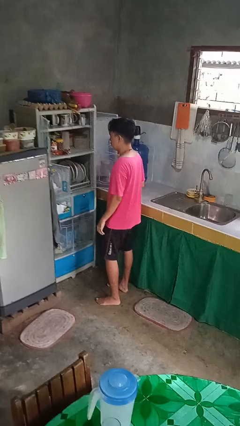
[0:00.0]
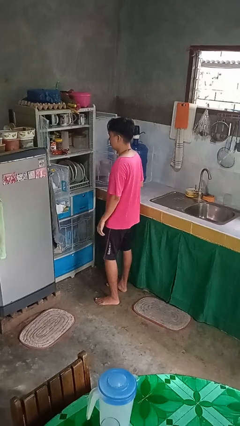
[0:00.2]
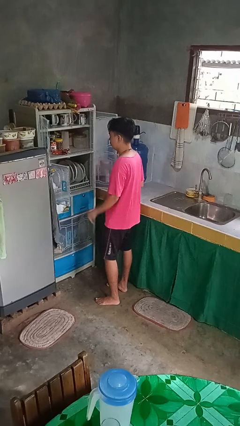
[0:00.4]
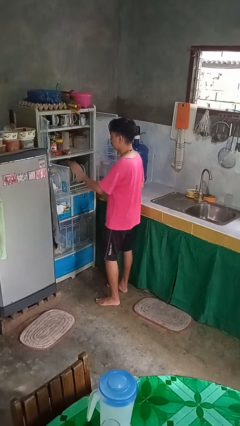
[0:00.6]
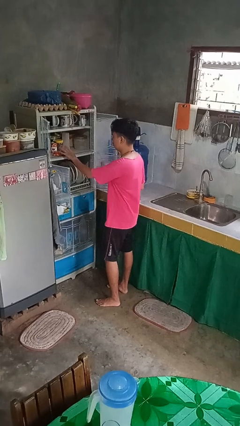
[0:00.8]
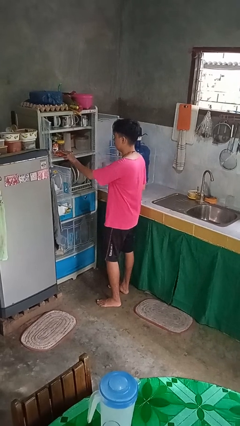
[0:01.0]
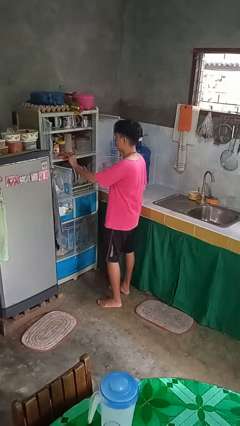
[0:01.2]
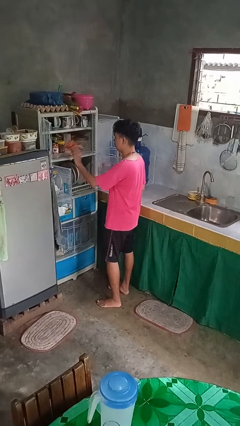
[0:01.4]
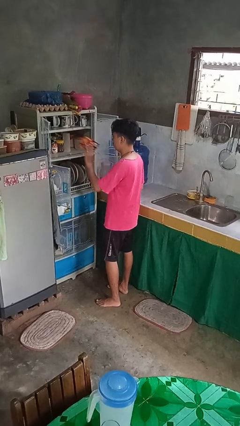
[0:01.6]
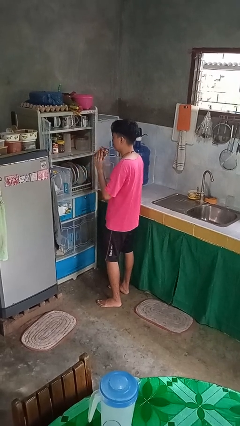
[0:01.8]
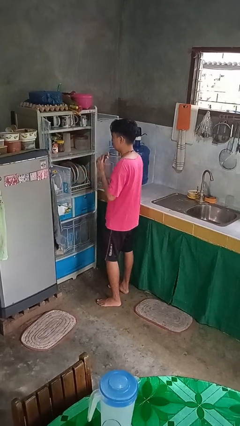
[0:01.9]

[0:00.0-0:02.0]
person takes object from cabinet

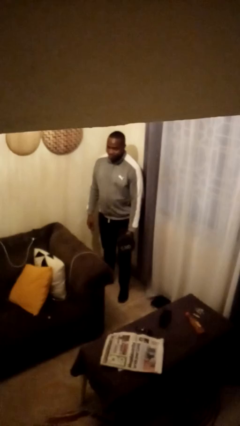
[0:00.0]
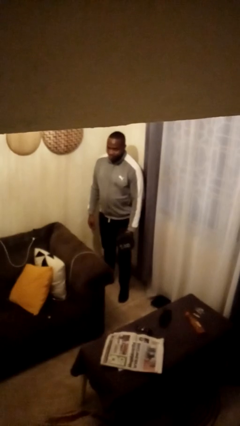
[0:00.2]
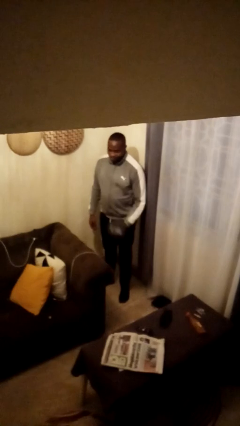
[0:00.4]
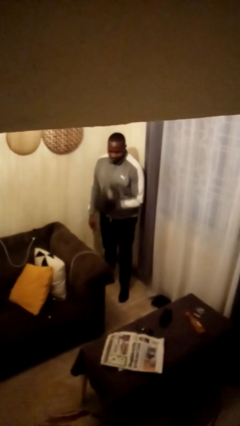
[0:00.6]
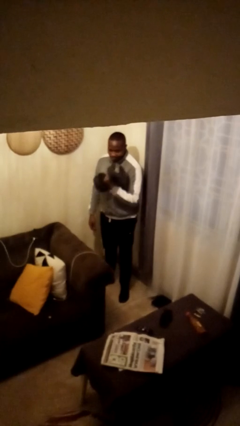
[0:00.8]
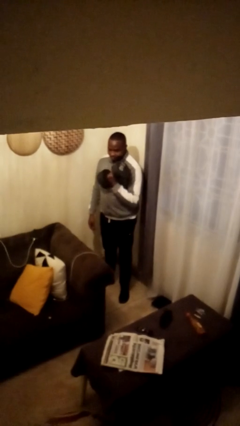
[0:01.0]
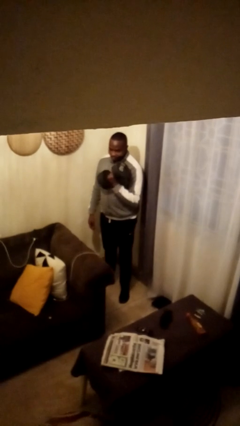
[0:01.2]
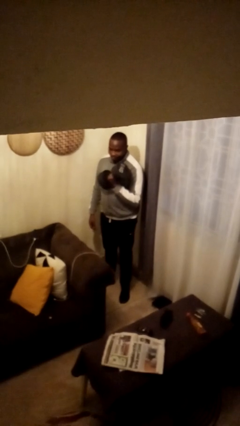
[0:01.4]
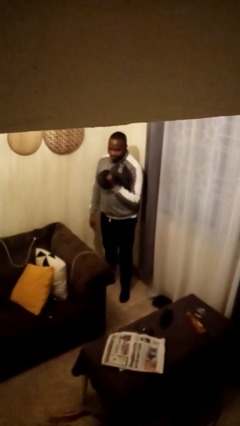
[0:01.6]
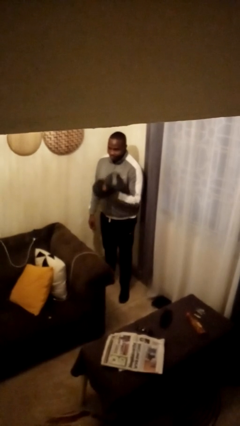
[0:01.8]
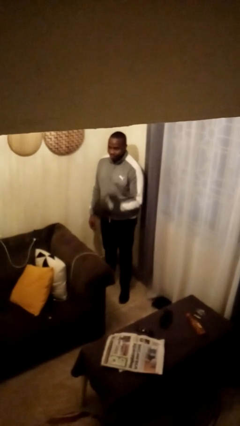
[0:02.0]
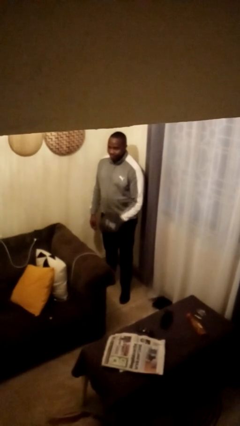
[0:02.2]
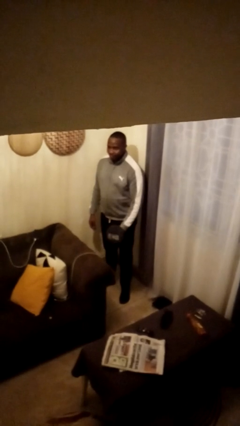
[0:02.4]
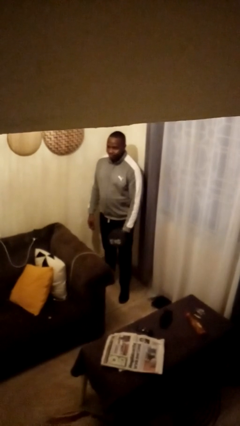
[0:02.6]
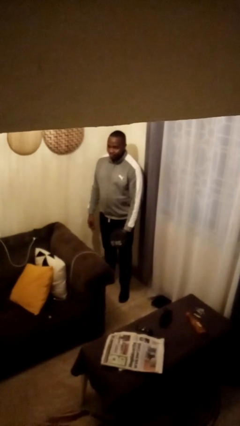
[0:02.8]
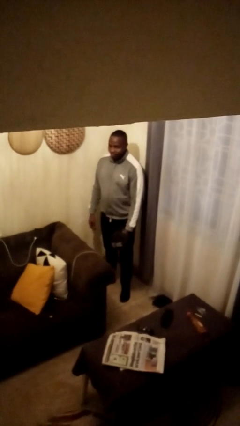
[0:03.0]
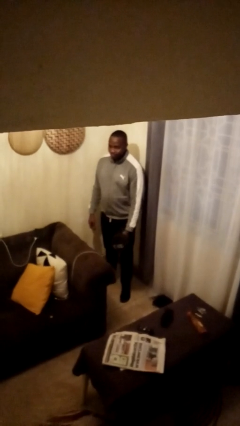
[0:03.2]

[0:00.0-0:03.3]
person lifts dumbbells

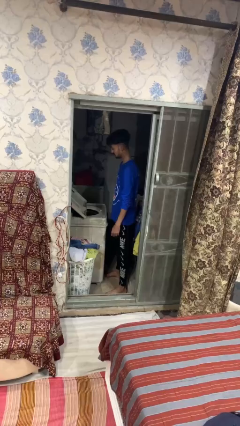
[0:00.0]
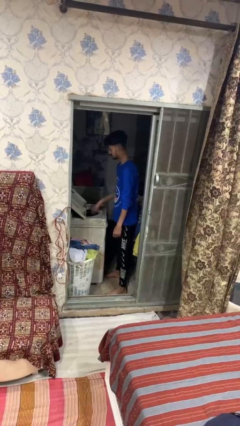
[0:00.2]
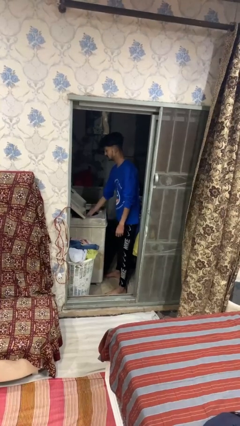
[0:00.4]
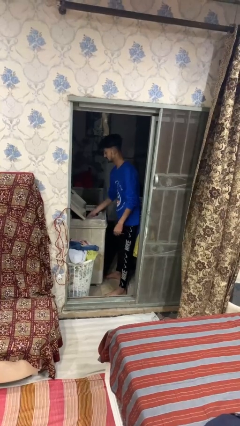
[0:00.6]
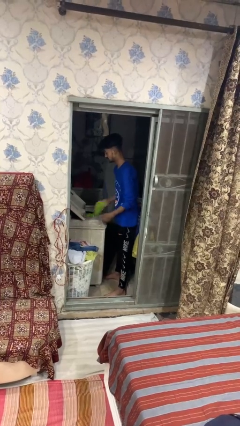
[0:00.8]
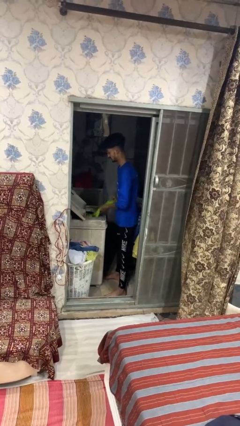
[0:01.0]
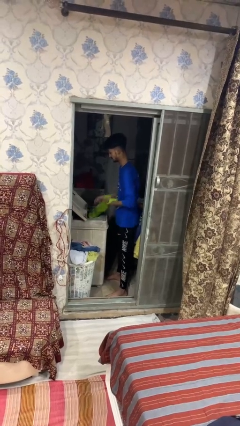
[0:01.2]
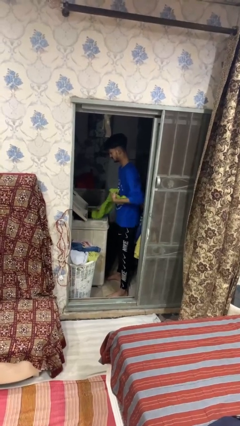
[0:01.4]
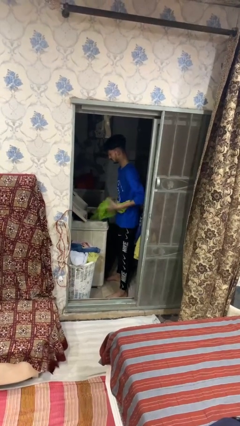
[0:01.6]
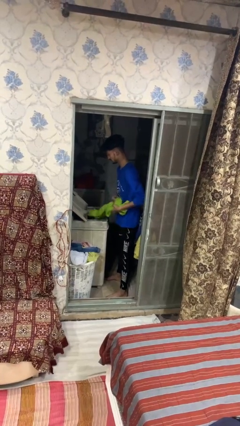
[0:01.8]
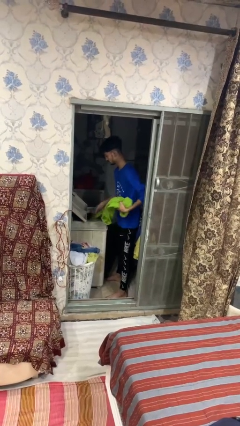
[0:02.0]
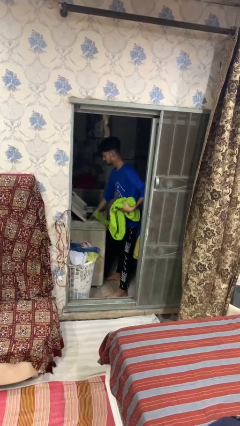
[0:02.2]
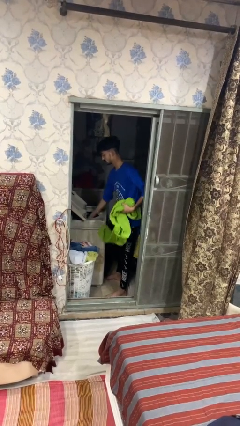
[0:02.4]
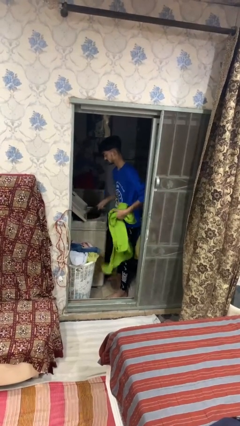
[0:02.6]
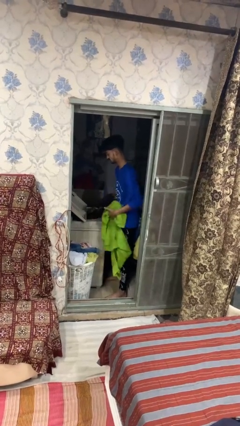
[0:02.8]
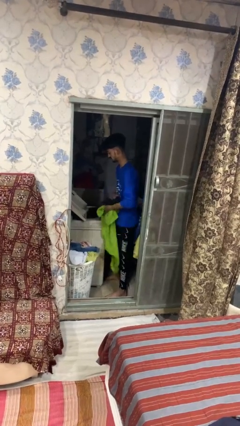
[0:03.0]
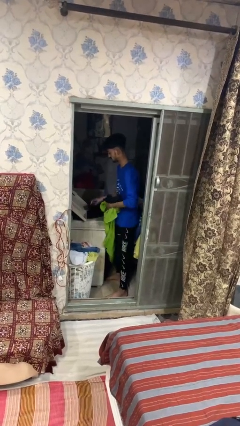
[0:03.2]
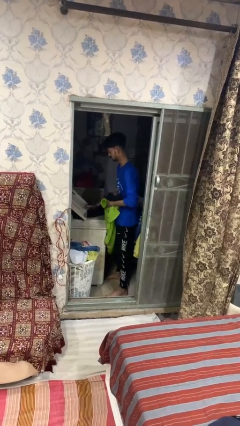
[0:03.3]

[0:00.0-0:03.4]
person unloads clotheswasher

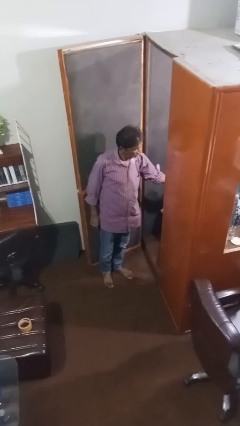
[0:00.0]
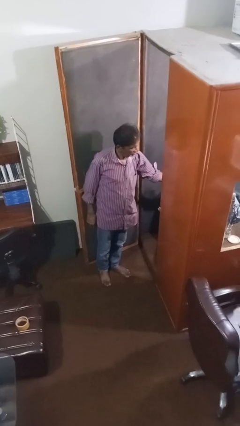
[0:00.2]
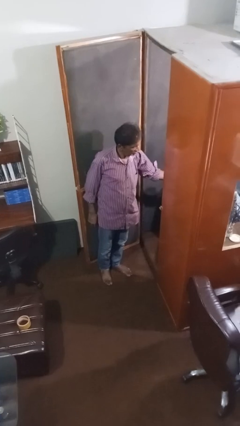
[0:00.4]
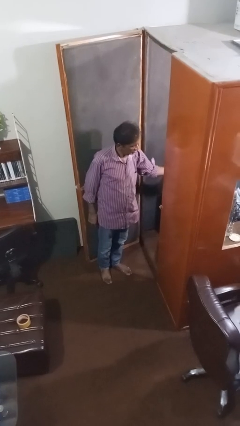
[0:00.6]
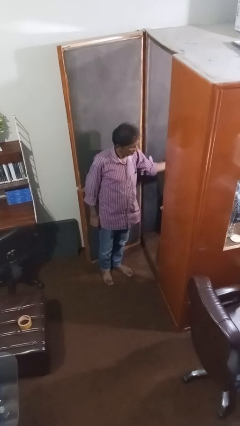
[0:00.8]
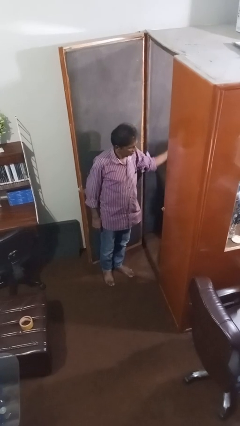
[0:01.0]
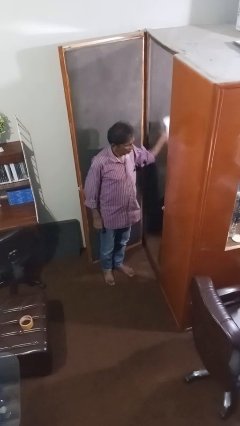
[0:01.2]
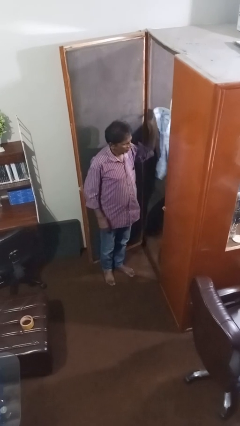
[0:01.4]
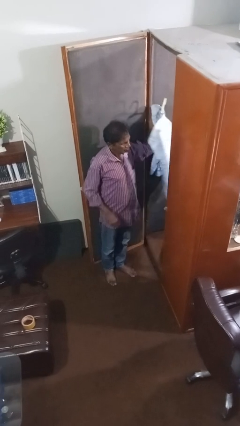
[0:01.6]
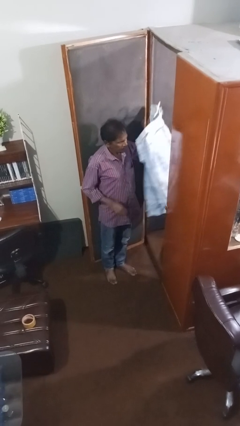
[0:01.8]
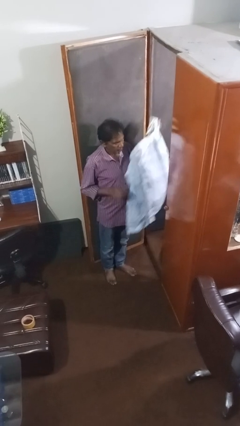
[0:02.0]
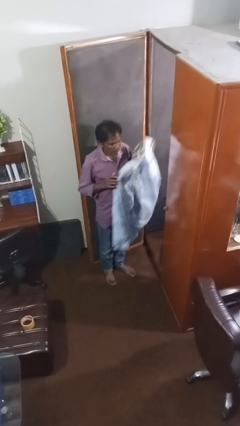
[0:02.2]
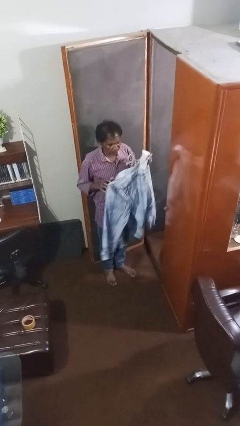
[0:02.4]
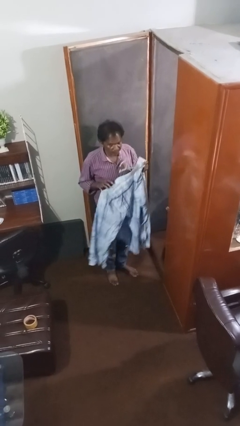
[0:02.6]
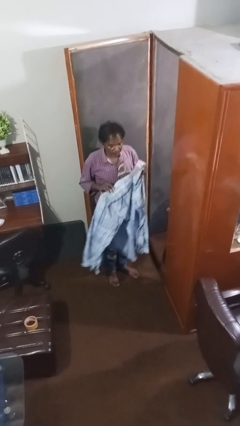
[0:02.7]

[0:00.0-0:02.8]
person takes clothes from closet

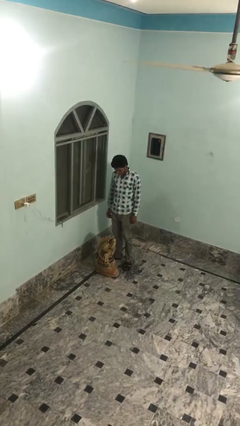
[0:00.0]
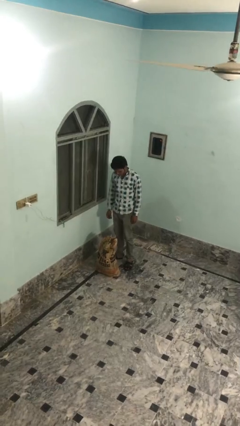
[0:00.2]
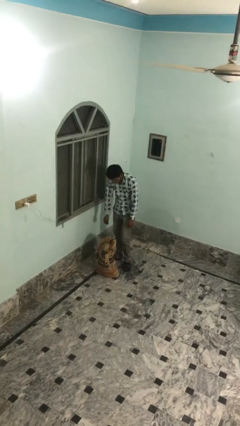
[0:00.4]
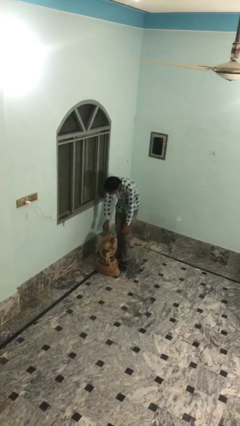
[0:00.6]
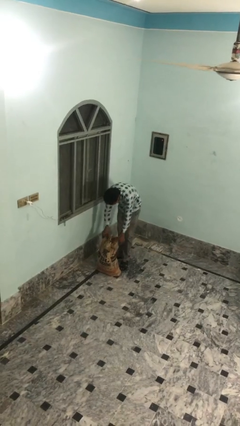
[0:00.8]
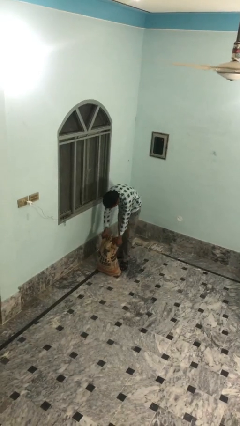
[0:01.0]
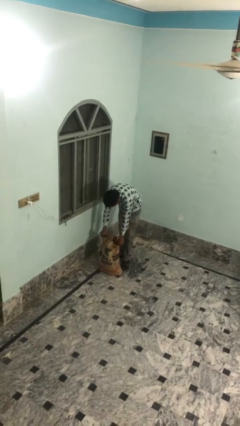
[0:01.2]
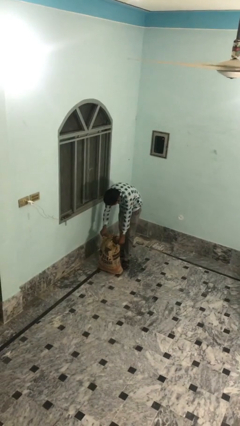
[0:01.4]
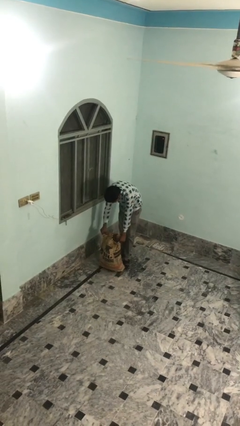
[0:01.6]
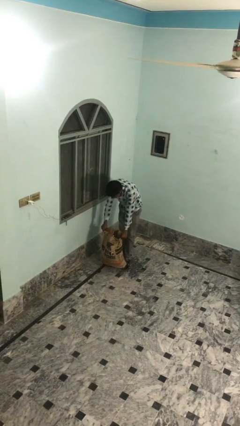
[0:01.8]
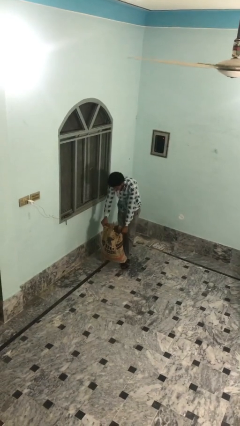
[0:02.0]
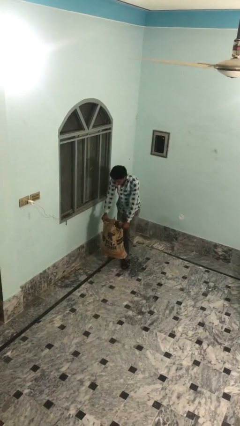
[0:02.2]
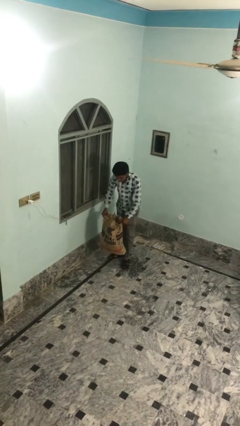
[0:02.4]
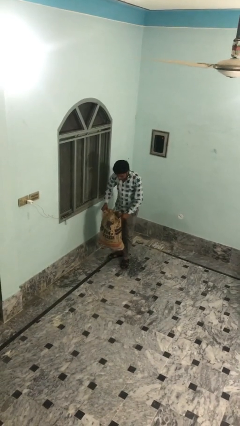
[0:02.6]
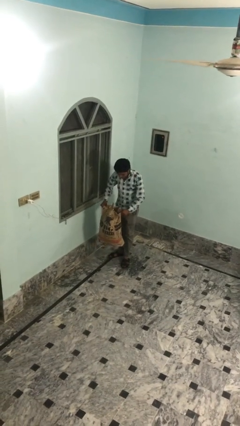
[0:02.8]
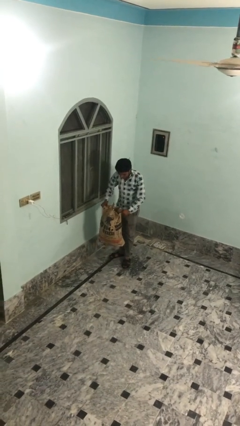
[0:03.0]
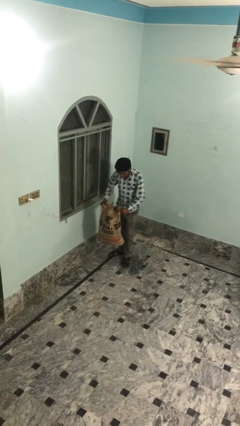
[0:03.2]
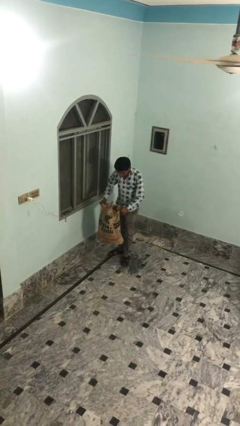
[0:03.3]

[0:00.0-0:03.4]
person picks up object from floor

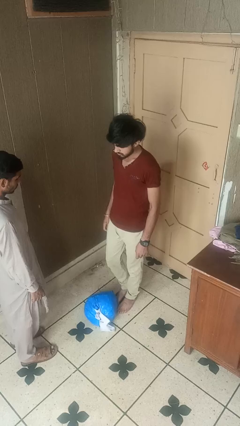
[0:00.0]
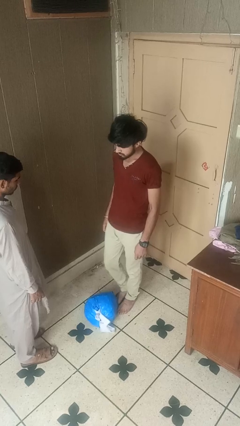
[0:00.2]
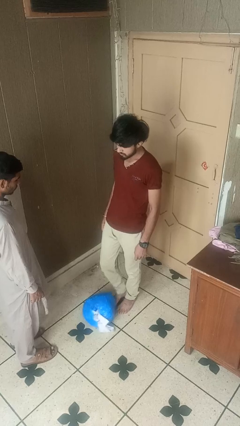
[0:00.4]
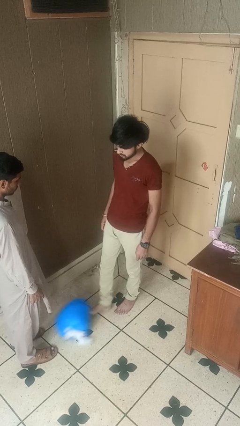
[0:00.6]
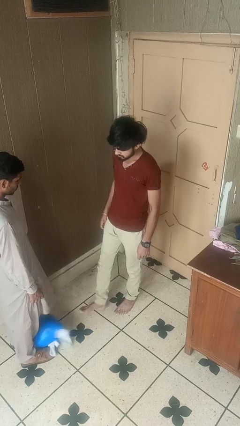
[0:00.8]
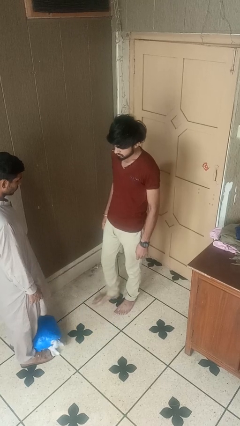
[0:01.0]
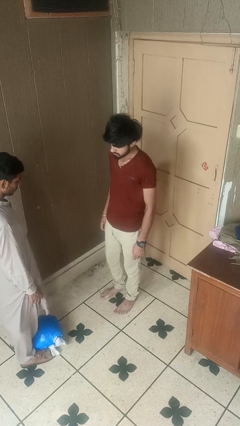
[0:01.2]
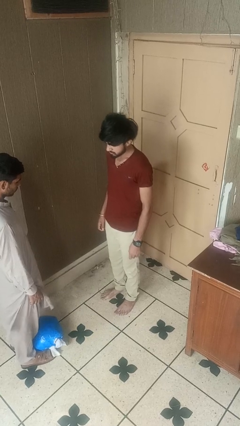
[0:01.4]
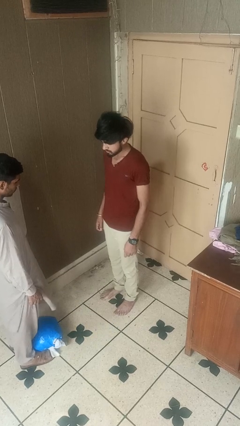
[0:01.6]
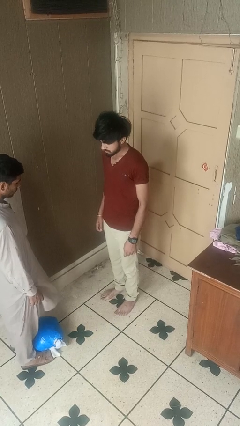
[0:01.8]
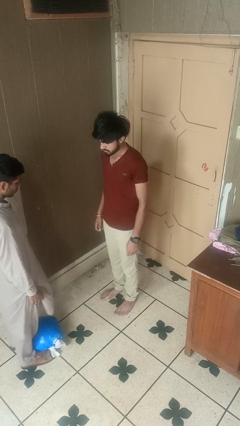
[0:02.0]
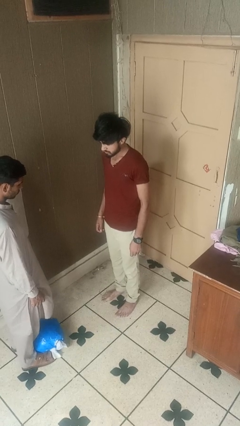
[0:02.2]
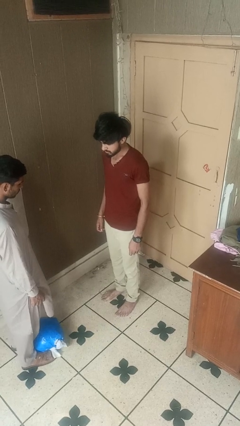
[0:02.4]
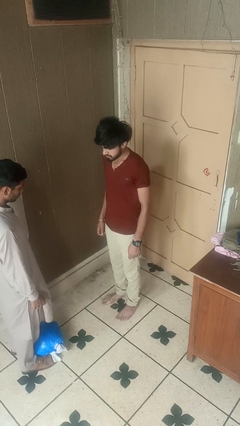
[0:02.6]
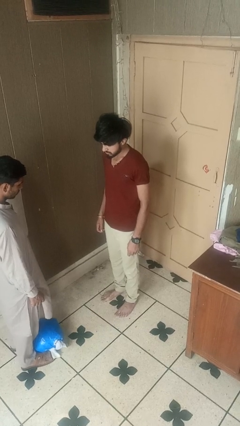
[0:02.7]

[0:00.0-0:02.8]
person kicks object to person
